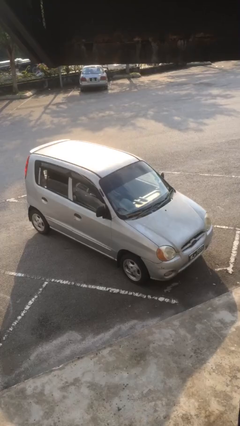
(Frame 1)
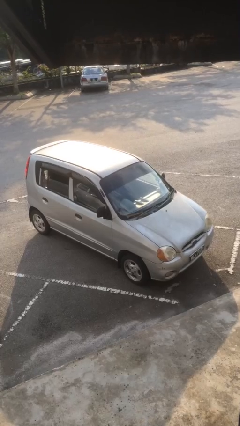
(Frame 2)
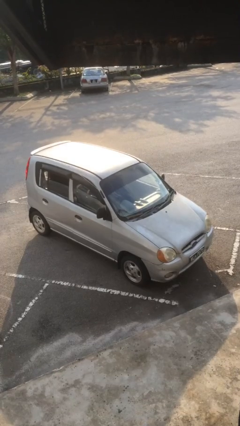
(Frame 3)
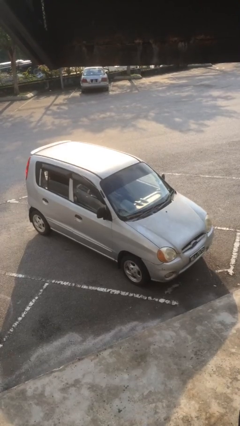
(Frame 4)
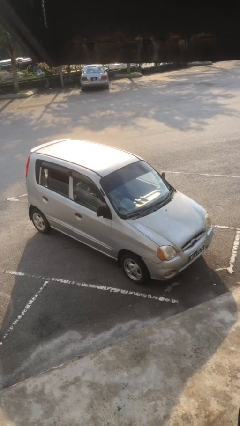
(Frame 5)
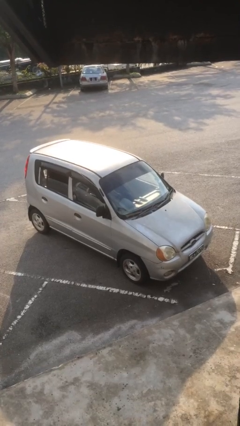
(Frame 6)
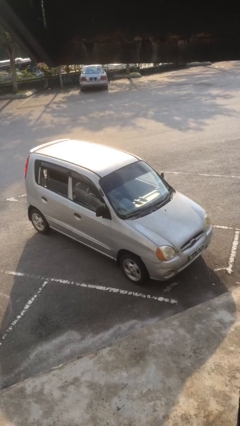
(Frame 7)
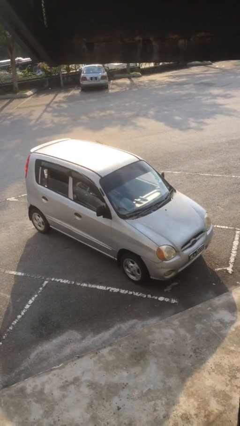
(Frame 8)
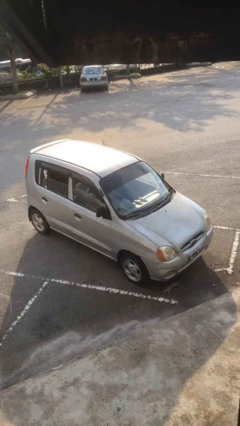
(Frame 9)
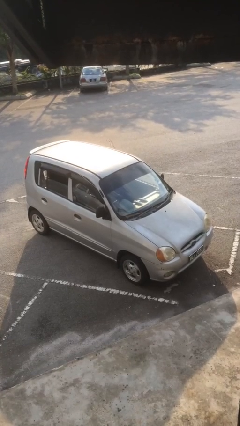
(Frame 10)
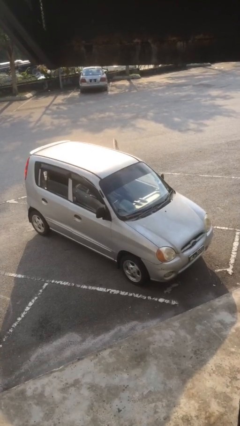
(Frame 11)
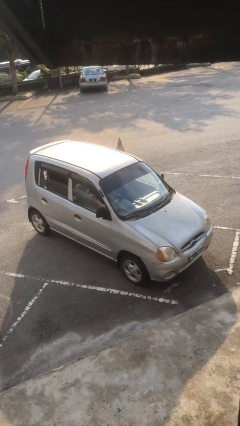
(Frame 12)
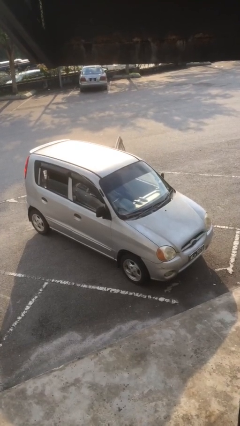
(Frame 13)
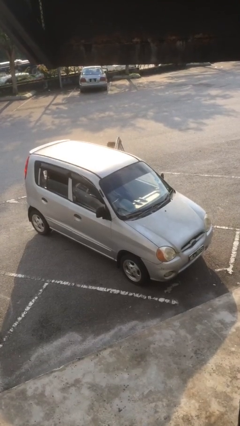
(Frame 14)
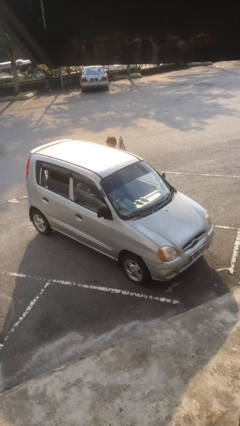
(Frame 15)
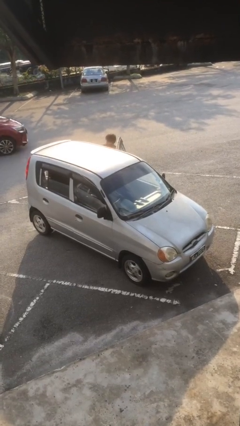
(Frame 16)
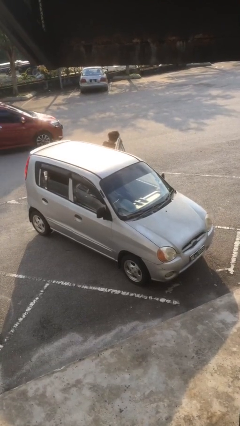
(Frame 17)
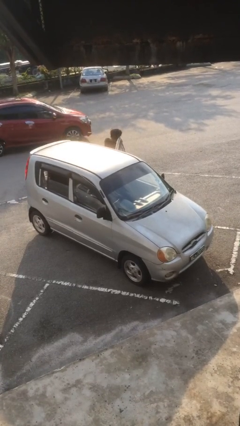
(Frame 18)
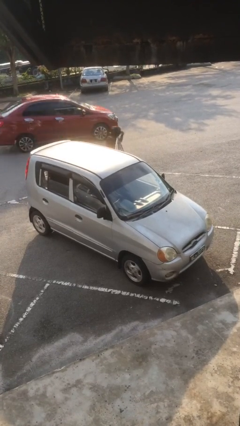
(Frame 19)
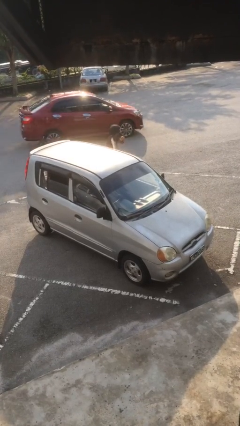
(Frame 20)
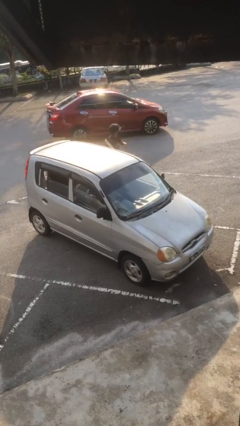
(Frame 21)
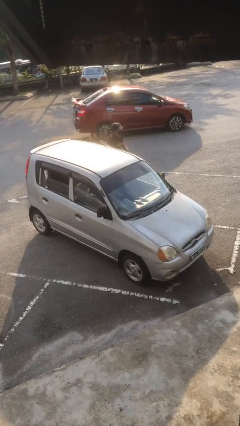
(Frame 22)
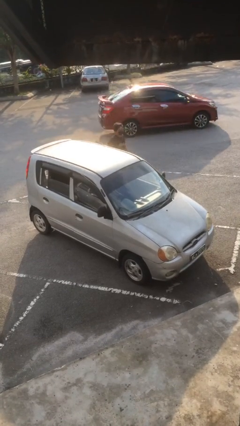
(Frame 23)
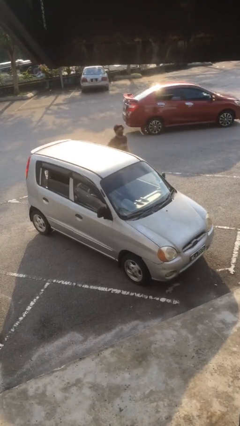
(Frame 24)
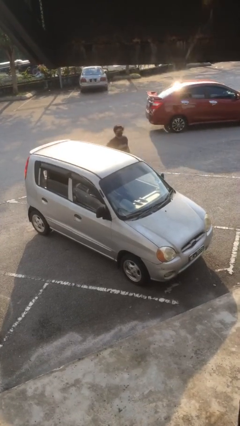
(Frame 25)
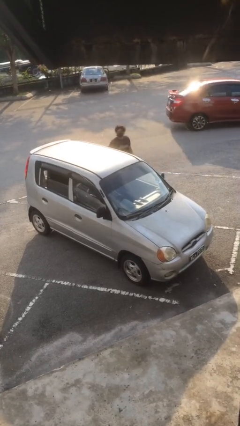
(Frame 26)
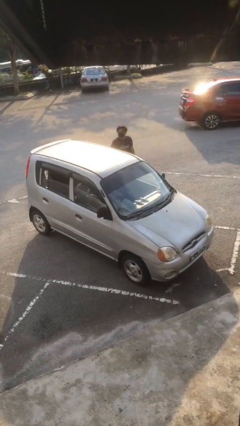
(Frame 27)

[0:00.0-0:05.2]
car drops off person

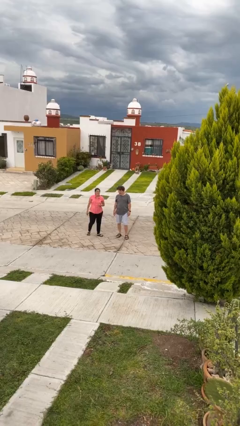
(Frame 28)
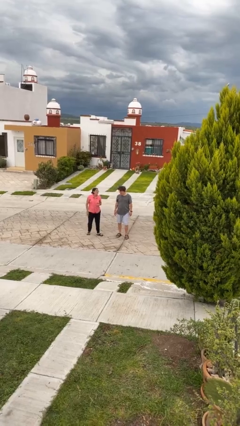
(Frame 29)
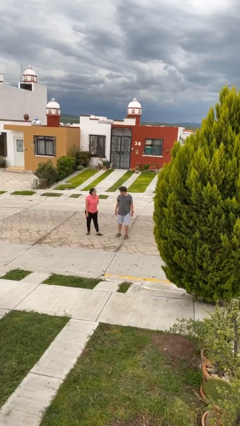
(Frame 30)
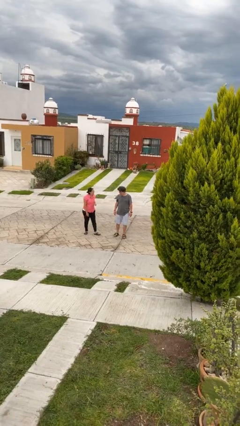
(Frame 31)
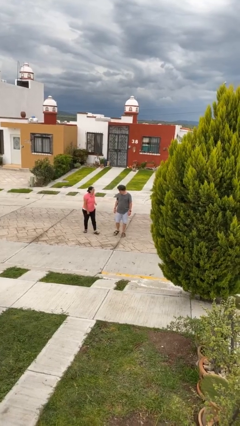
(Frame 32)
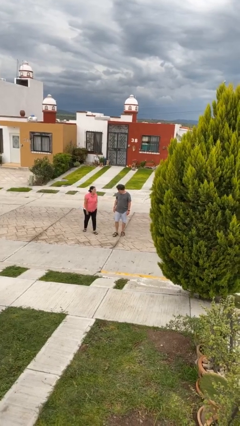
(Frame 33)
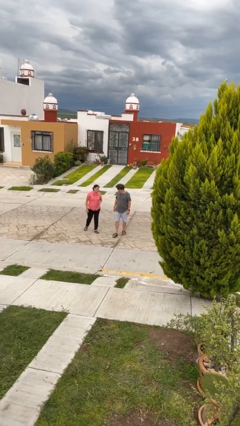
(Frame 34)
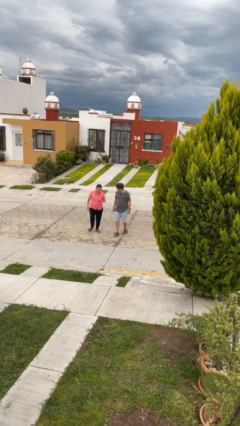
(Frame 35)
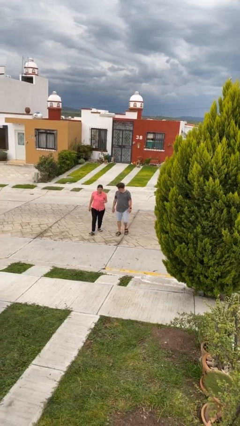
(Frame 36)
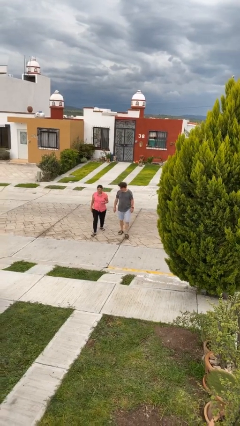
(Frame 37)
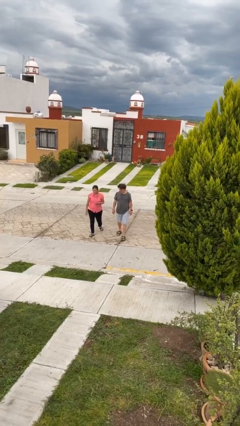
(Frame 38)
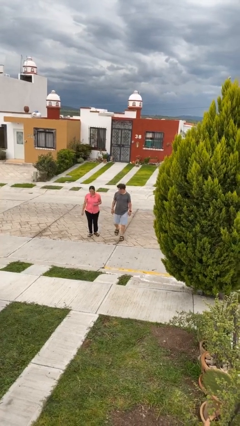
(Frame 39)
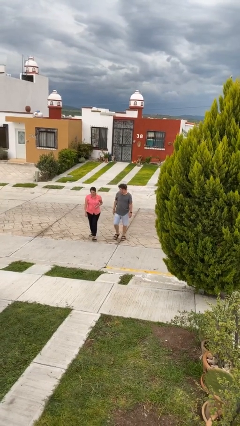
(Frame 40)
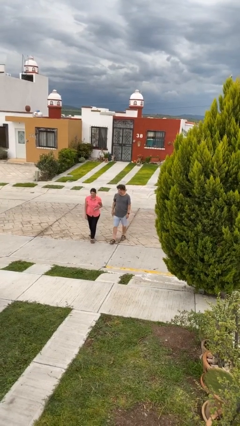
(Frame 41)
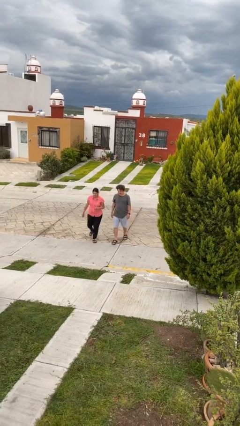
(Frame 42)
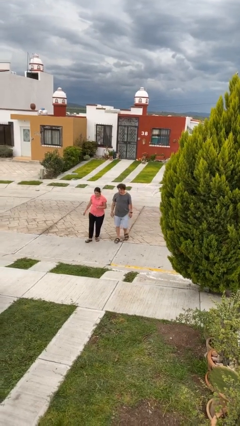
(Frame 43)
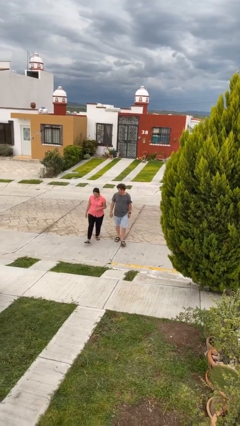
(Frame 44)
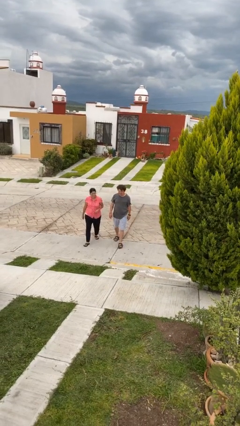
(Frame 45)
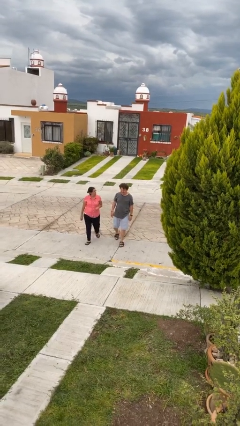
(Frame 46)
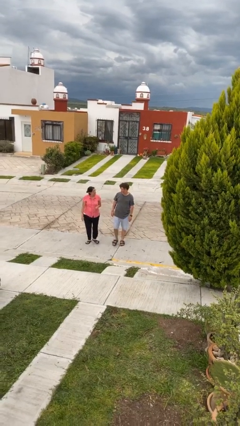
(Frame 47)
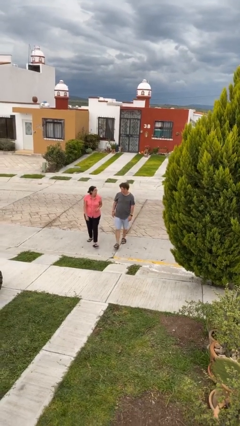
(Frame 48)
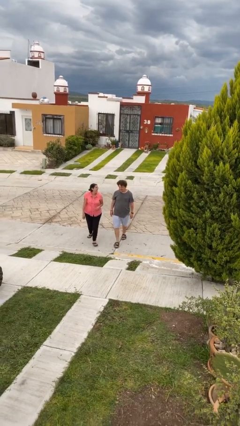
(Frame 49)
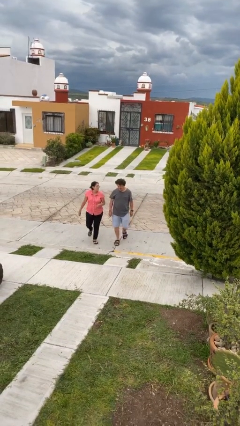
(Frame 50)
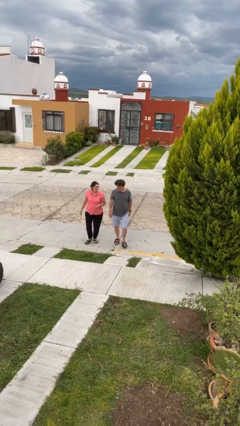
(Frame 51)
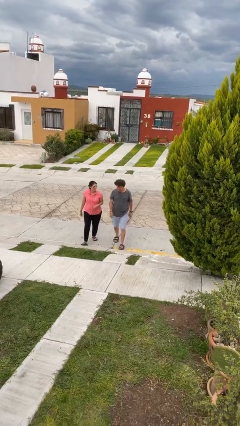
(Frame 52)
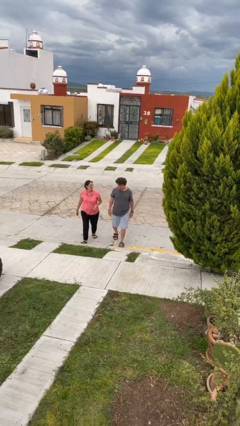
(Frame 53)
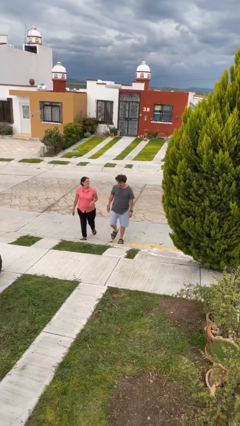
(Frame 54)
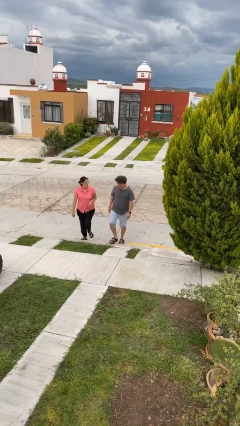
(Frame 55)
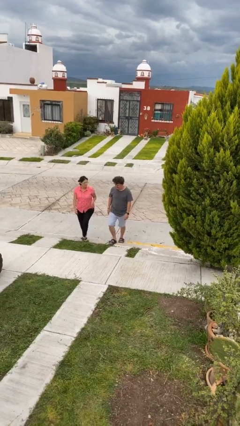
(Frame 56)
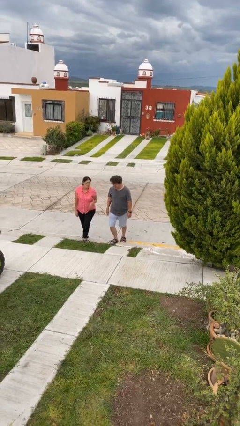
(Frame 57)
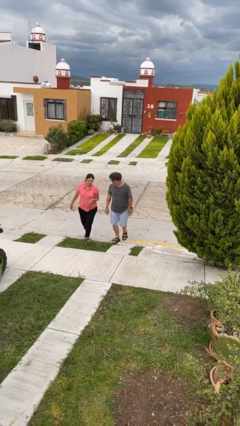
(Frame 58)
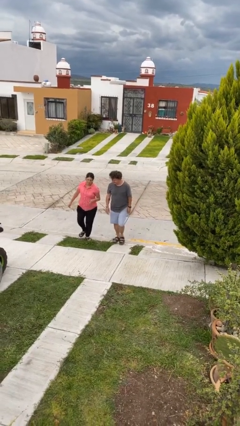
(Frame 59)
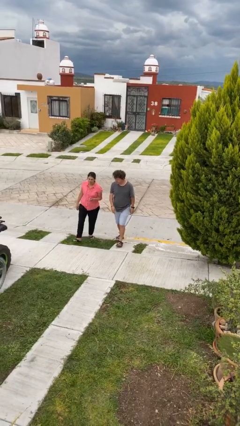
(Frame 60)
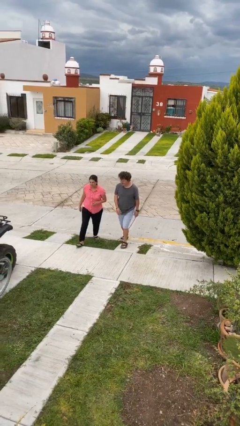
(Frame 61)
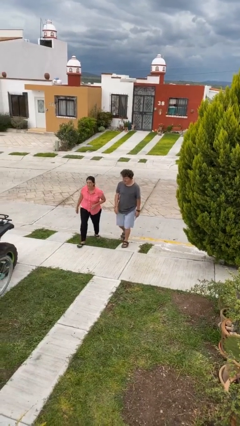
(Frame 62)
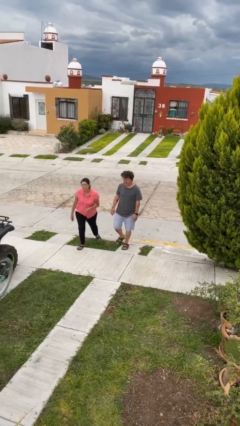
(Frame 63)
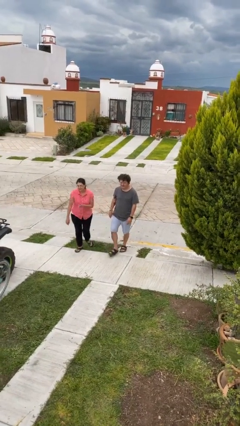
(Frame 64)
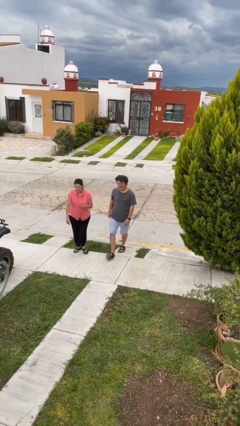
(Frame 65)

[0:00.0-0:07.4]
person talks to person

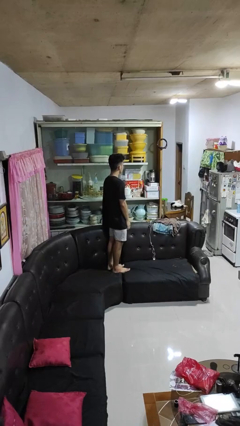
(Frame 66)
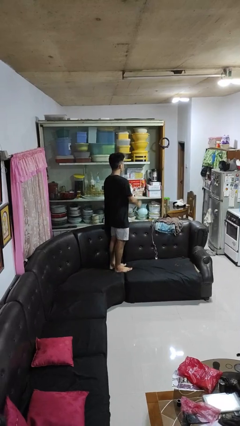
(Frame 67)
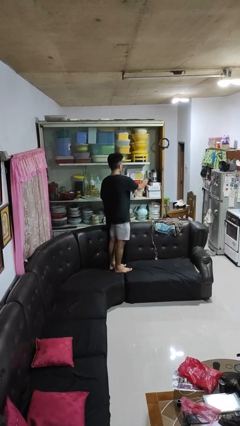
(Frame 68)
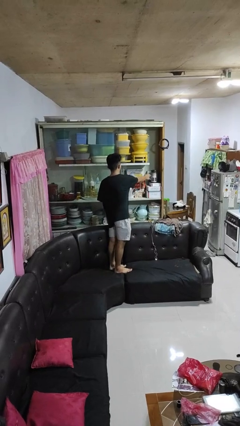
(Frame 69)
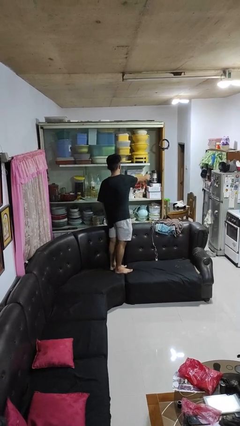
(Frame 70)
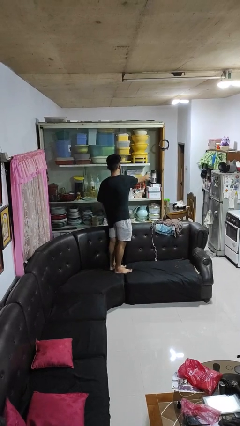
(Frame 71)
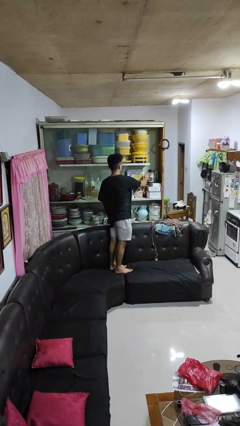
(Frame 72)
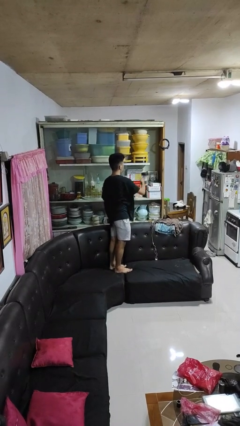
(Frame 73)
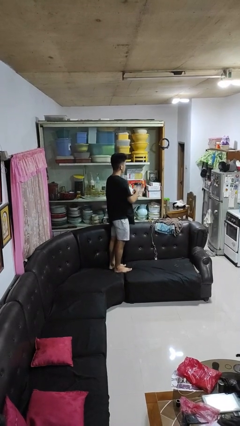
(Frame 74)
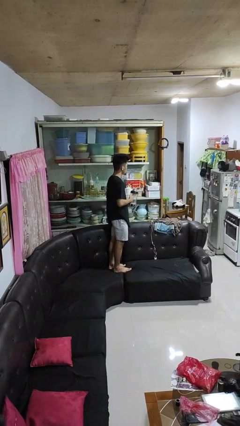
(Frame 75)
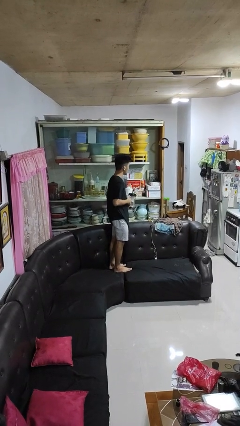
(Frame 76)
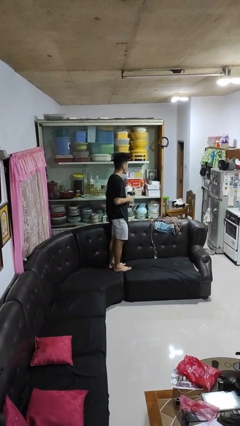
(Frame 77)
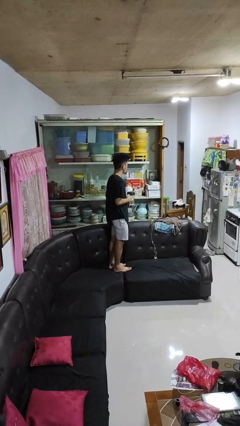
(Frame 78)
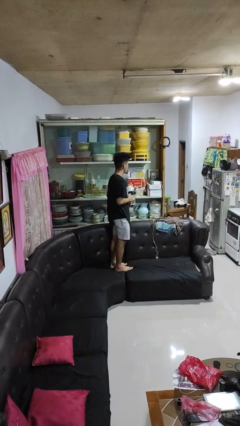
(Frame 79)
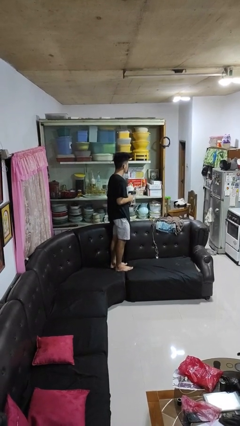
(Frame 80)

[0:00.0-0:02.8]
person picks up object from cabinet

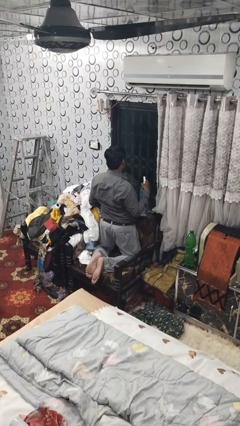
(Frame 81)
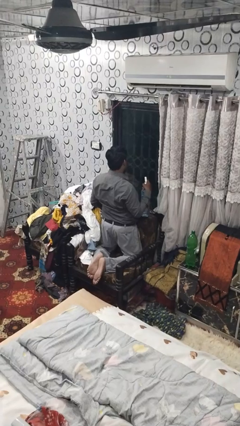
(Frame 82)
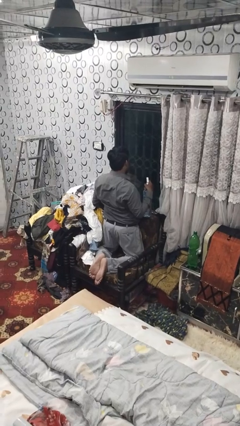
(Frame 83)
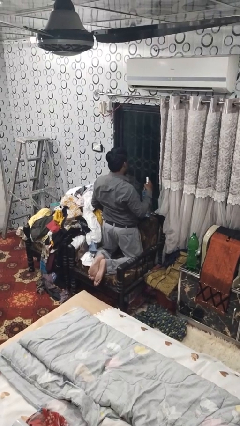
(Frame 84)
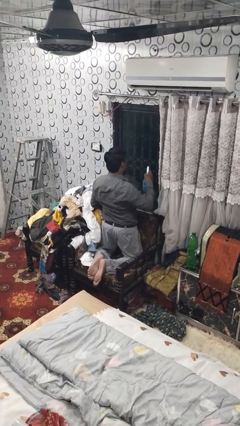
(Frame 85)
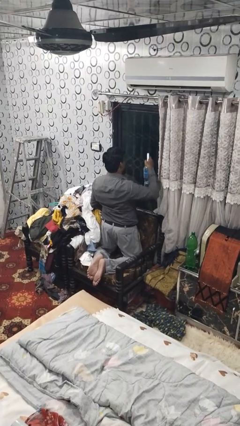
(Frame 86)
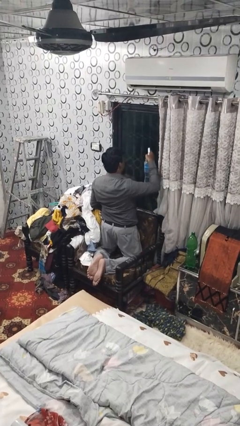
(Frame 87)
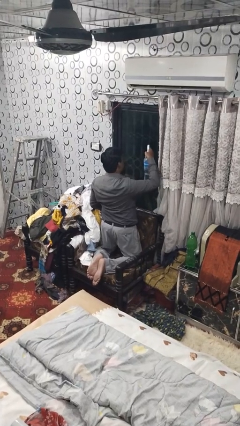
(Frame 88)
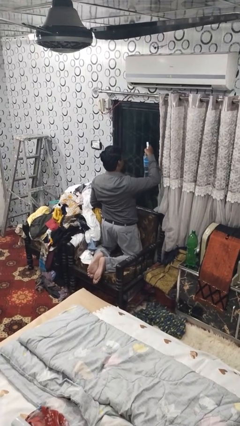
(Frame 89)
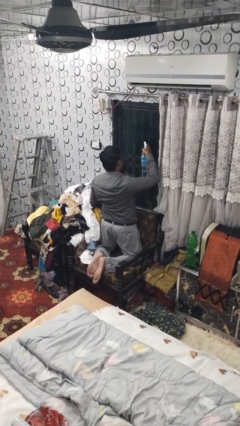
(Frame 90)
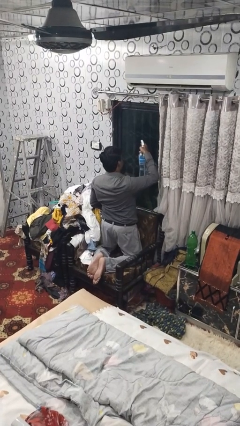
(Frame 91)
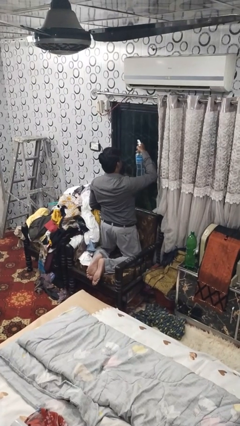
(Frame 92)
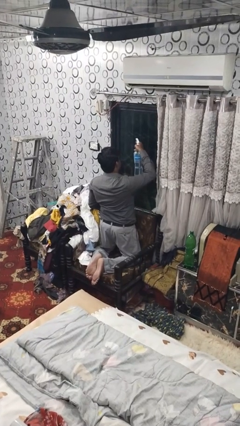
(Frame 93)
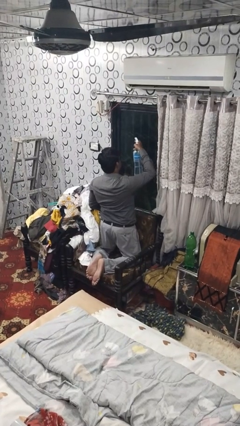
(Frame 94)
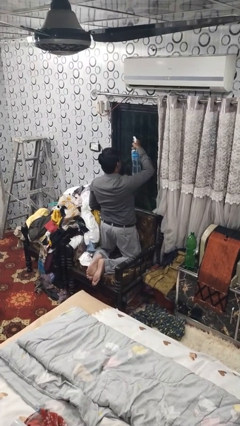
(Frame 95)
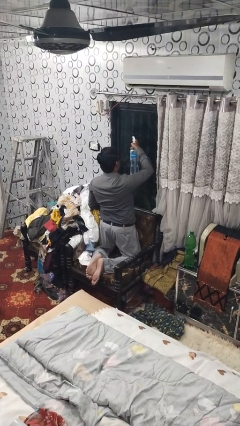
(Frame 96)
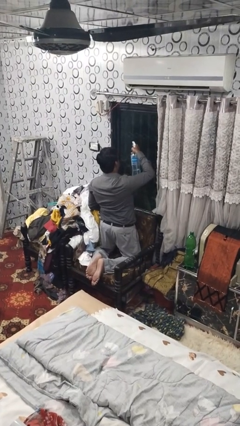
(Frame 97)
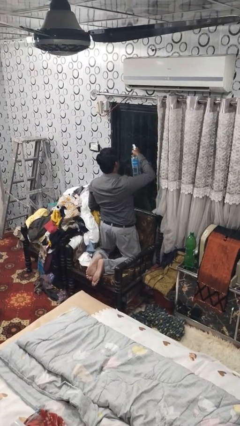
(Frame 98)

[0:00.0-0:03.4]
person sprays from bottle
